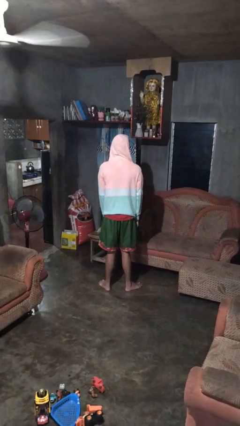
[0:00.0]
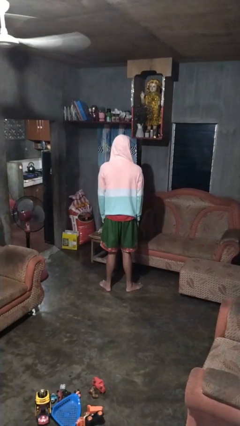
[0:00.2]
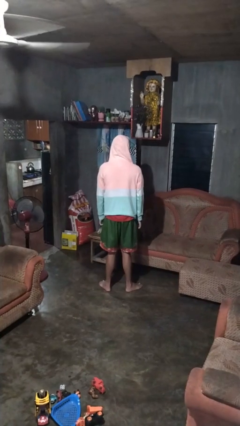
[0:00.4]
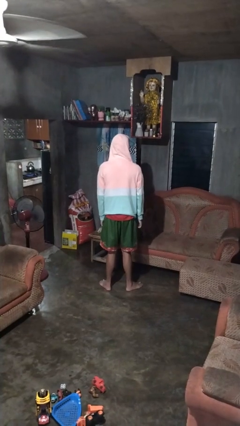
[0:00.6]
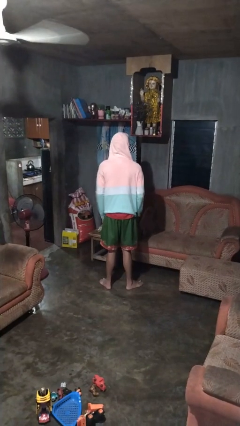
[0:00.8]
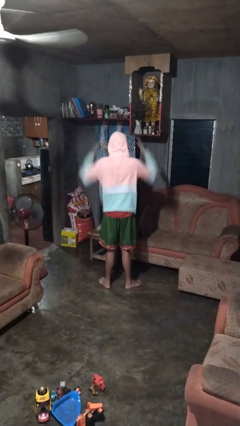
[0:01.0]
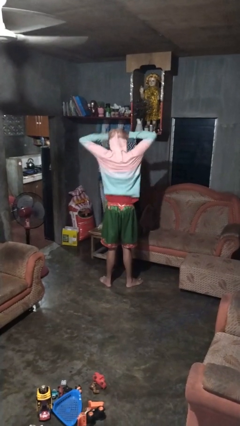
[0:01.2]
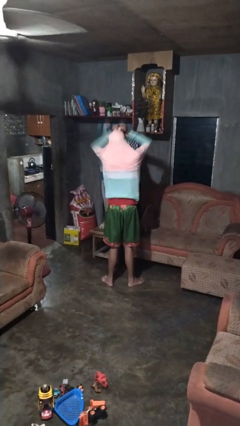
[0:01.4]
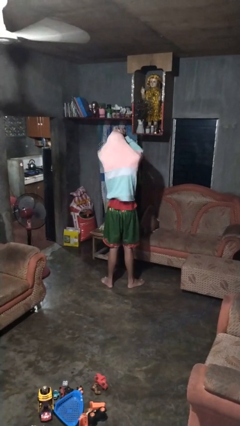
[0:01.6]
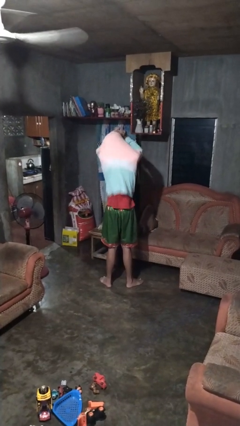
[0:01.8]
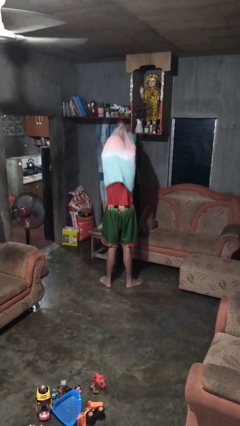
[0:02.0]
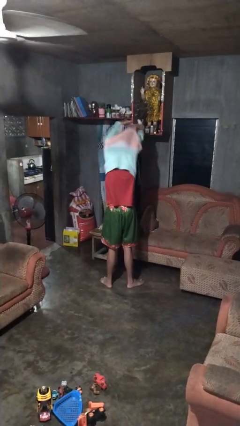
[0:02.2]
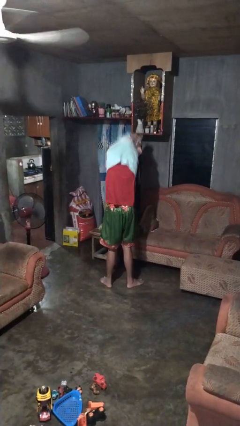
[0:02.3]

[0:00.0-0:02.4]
person takes off hoodie

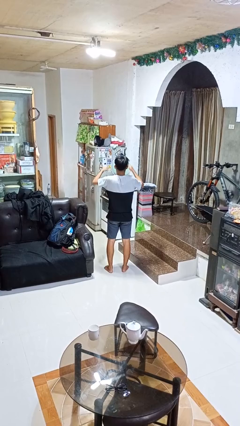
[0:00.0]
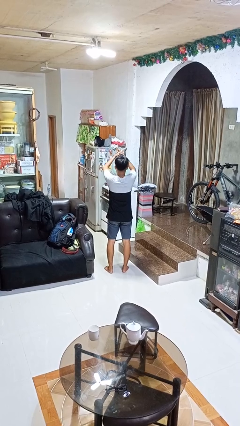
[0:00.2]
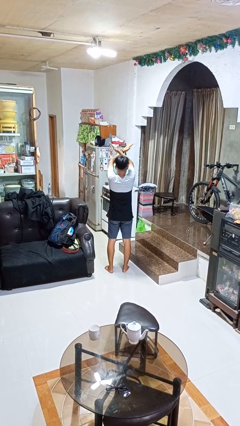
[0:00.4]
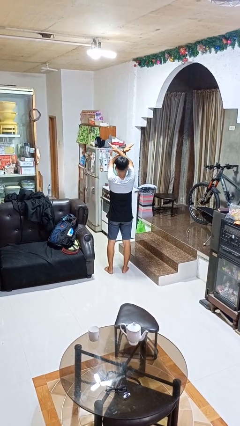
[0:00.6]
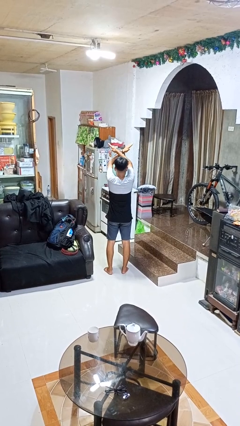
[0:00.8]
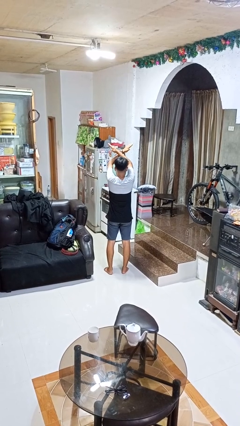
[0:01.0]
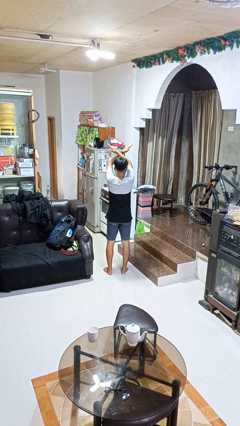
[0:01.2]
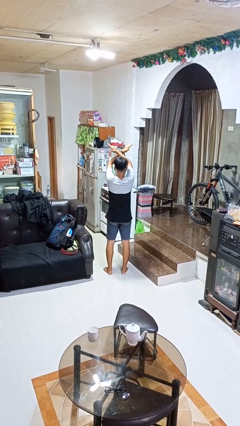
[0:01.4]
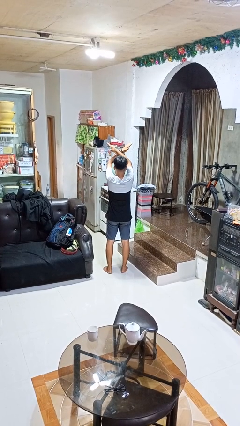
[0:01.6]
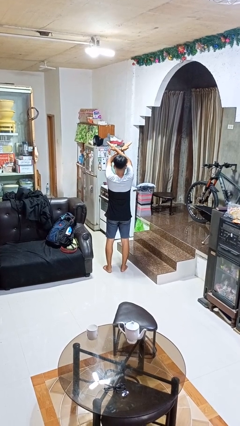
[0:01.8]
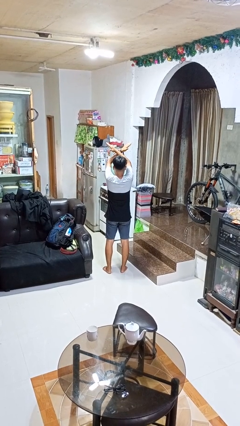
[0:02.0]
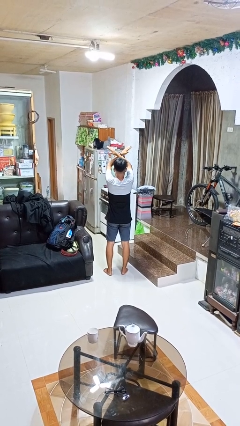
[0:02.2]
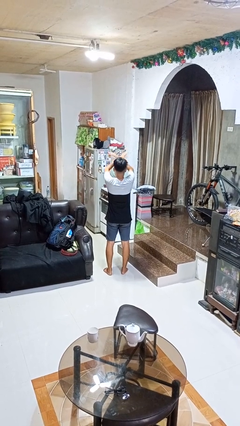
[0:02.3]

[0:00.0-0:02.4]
person gestures arms x

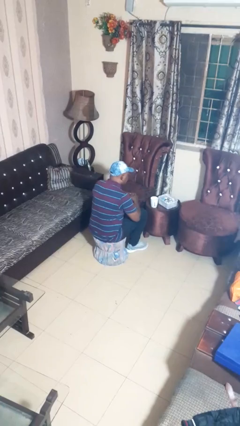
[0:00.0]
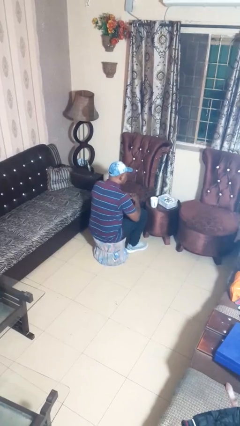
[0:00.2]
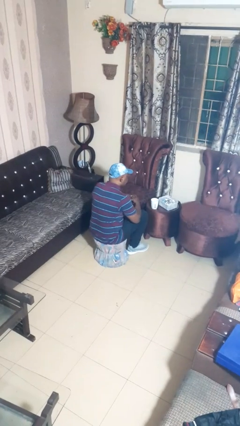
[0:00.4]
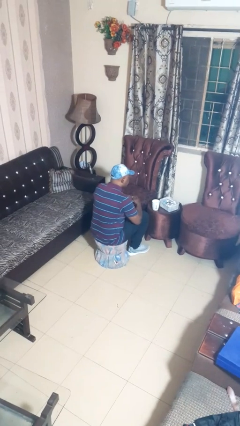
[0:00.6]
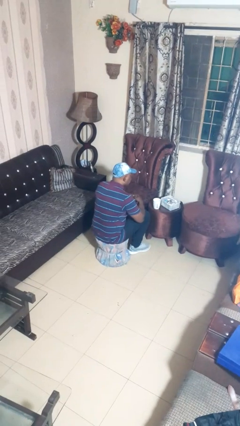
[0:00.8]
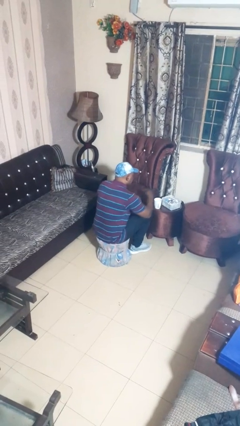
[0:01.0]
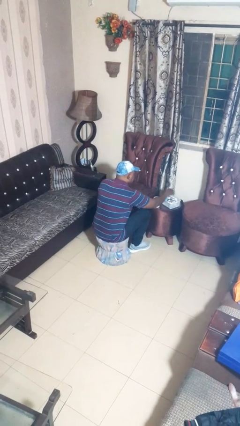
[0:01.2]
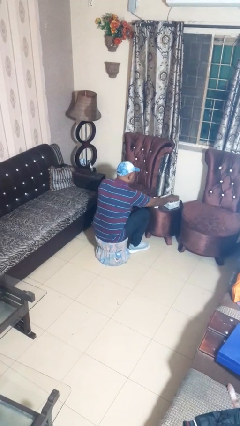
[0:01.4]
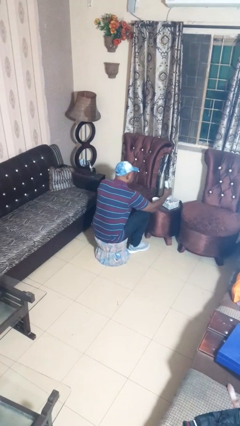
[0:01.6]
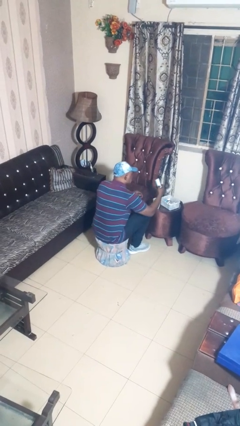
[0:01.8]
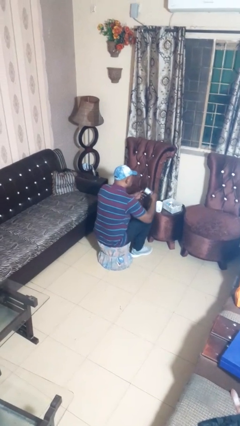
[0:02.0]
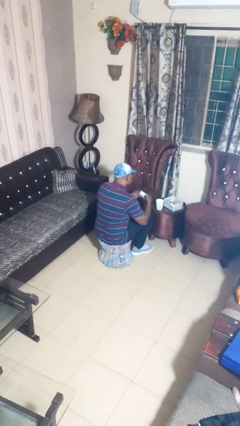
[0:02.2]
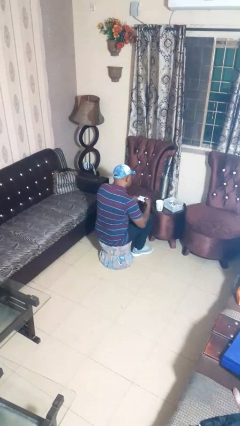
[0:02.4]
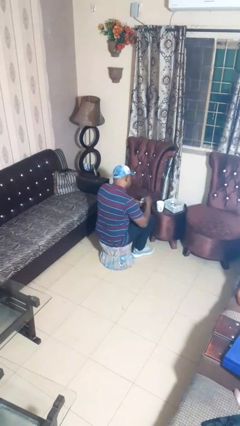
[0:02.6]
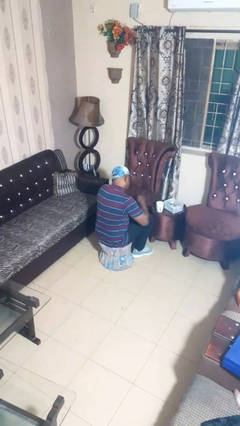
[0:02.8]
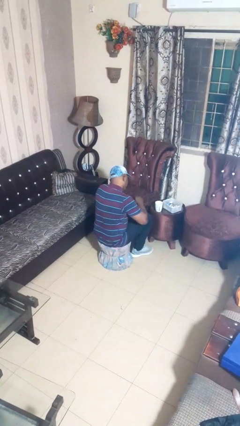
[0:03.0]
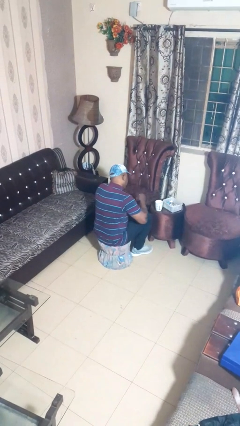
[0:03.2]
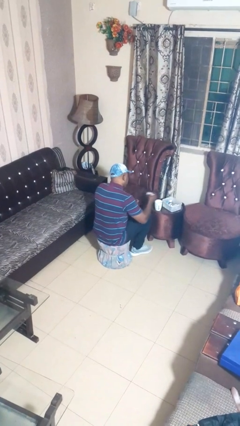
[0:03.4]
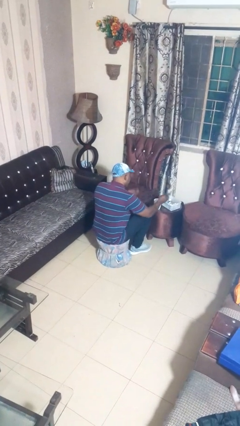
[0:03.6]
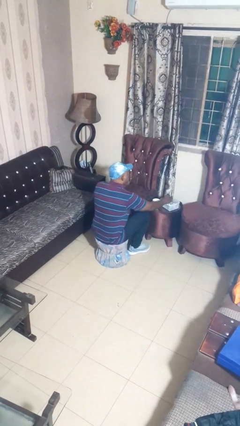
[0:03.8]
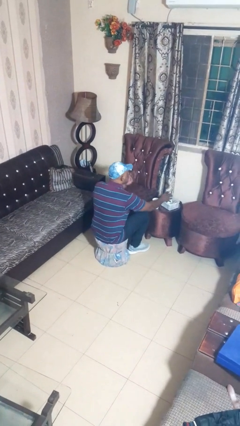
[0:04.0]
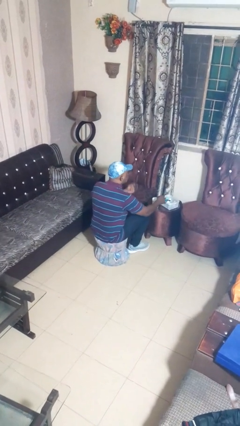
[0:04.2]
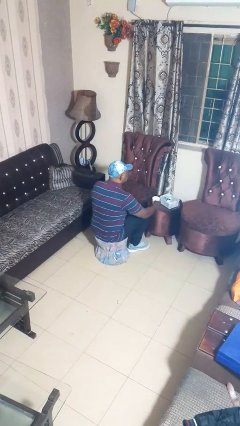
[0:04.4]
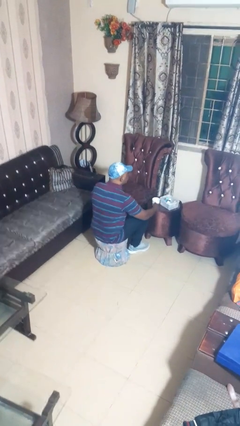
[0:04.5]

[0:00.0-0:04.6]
person takes medicine pills

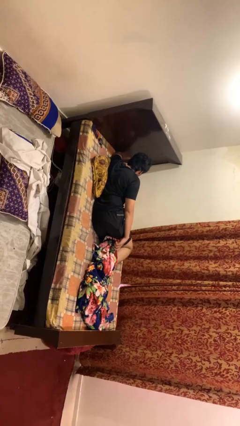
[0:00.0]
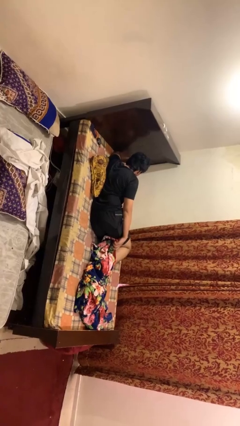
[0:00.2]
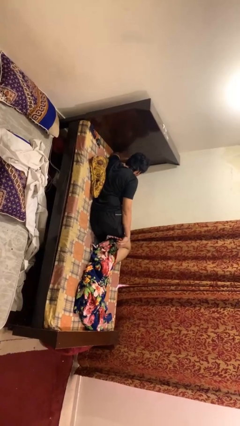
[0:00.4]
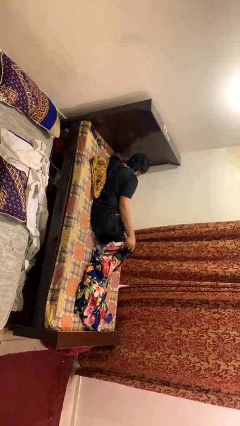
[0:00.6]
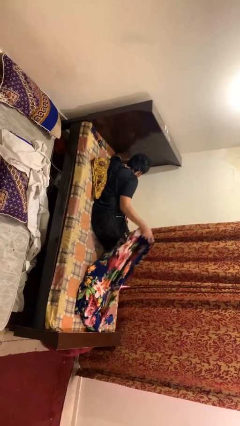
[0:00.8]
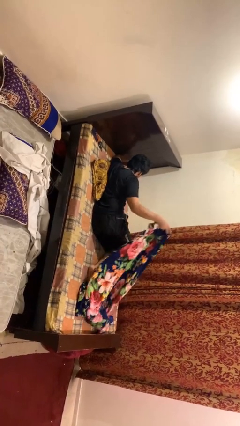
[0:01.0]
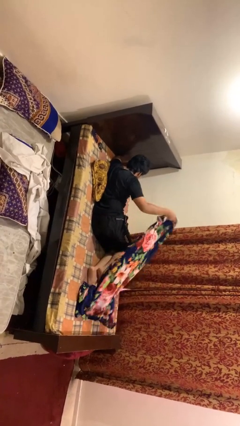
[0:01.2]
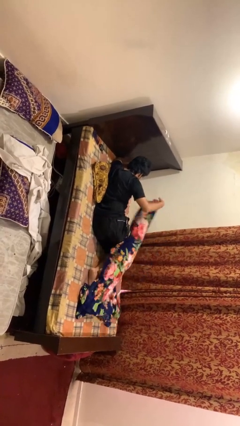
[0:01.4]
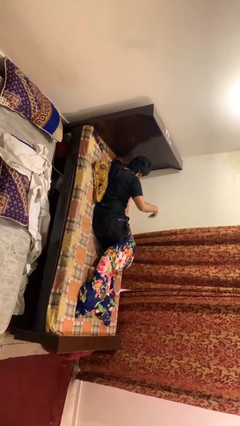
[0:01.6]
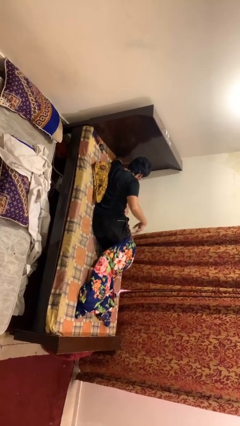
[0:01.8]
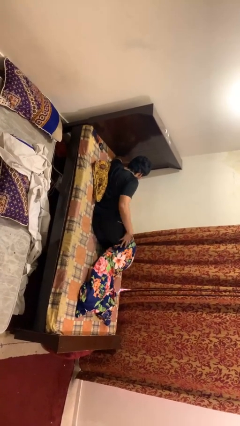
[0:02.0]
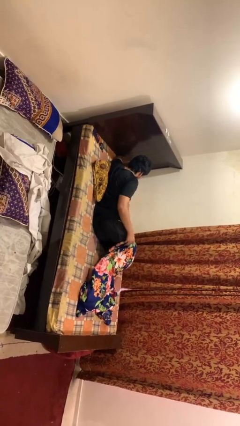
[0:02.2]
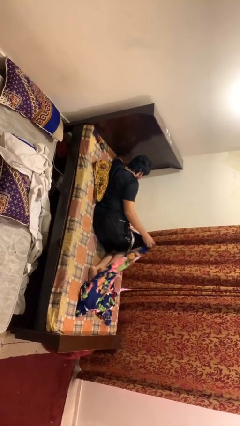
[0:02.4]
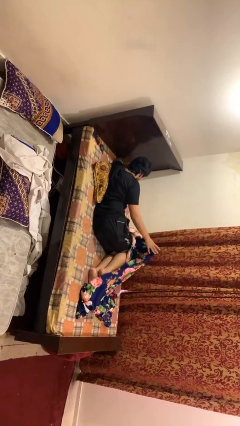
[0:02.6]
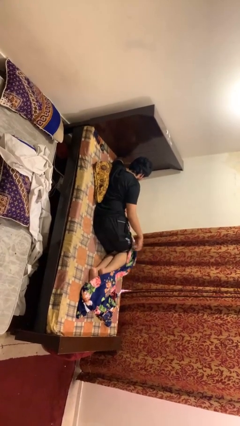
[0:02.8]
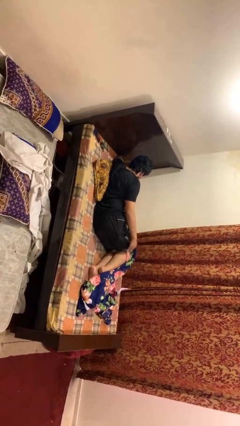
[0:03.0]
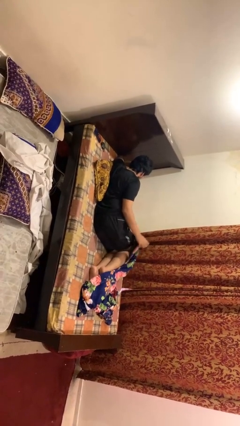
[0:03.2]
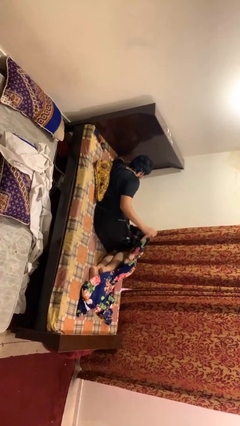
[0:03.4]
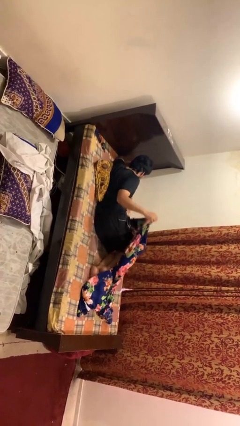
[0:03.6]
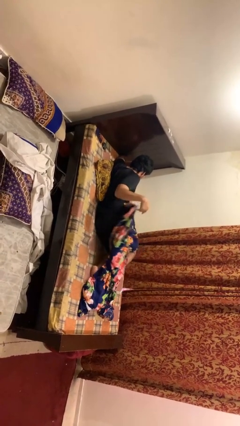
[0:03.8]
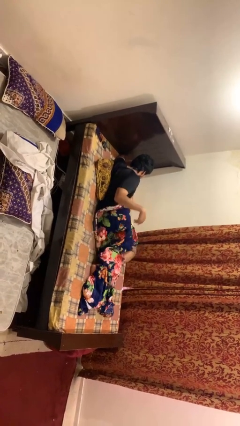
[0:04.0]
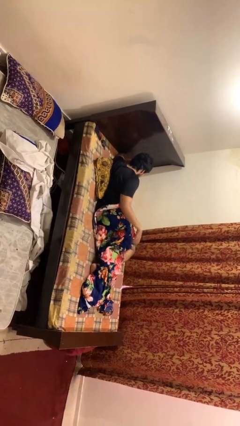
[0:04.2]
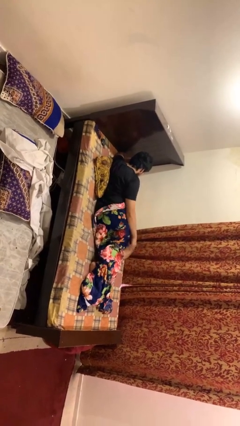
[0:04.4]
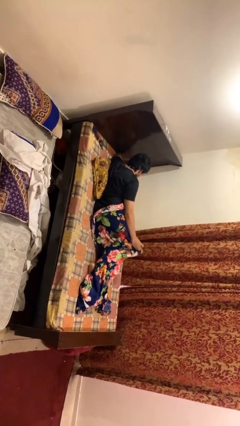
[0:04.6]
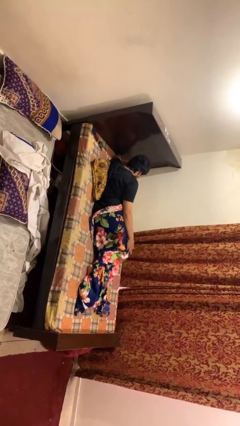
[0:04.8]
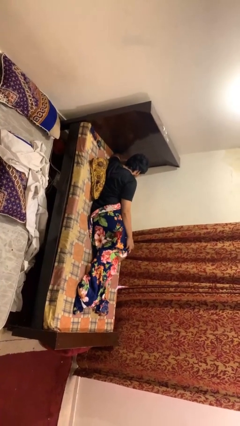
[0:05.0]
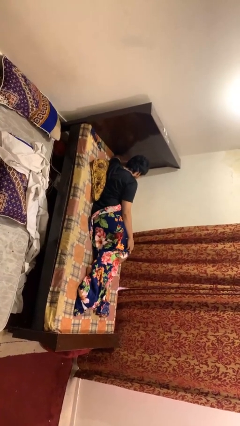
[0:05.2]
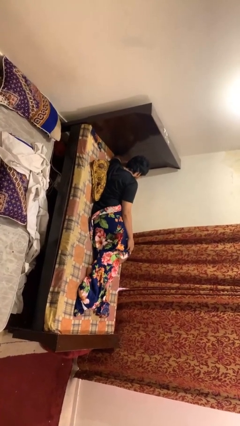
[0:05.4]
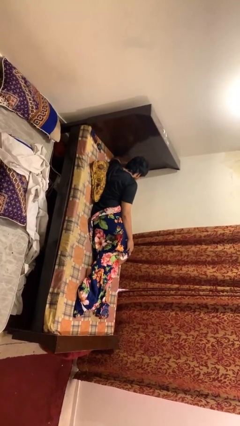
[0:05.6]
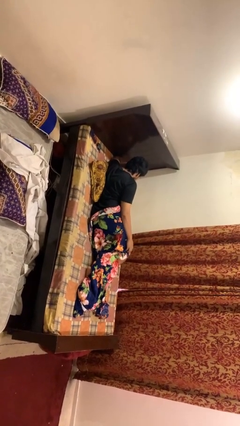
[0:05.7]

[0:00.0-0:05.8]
person covers with blanket

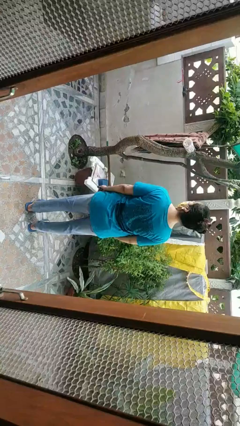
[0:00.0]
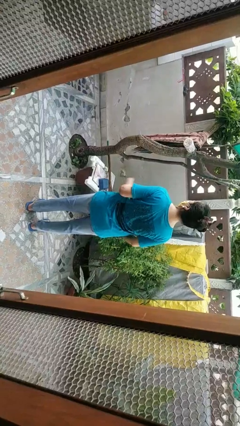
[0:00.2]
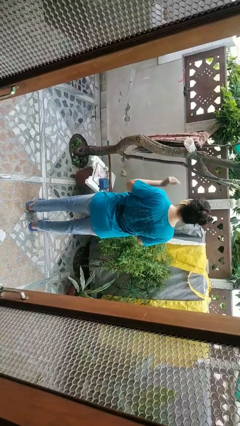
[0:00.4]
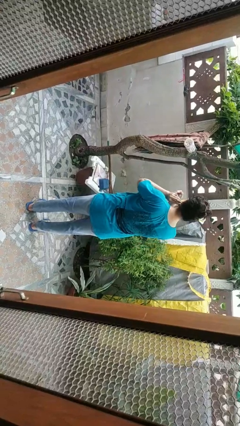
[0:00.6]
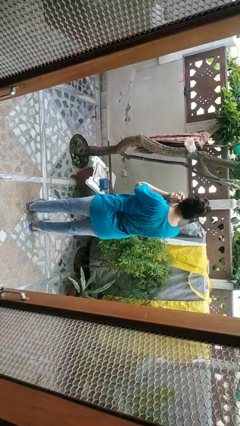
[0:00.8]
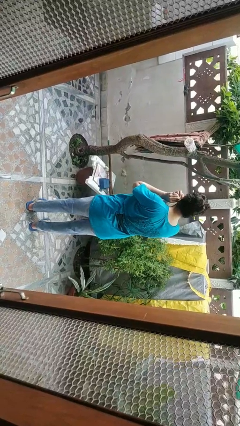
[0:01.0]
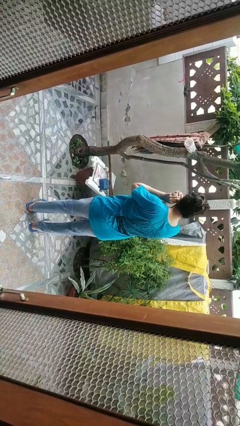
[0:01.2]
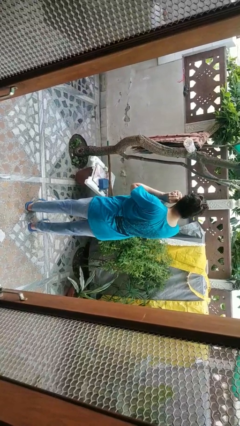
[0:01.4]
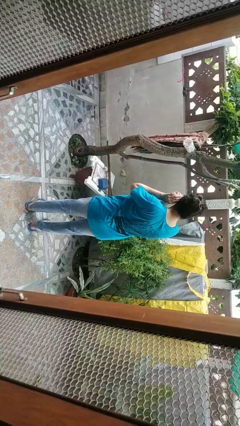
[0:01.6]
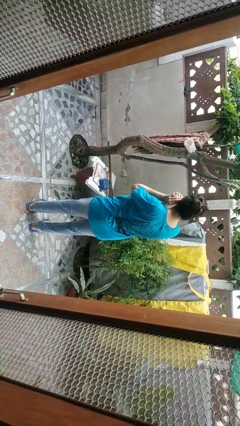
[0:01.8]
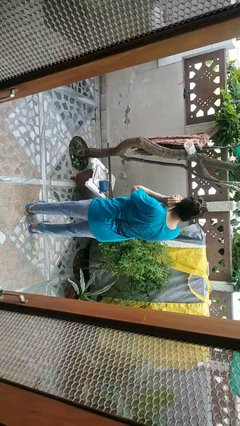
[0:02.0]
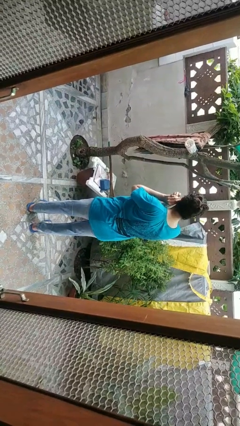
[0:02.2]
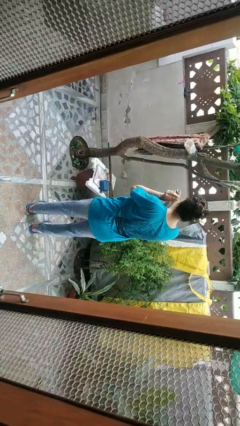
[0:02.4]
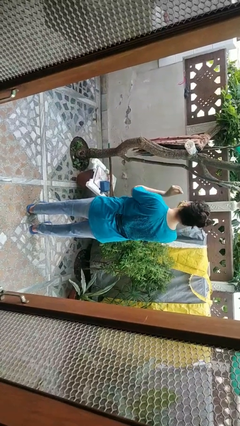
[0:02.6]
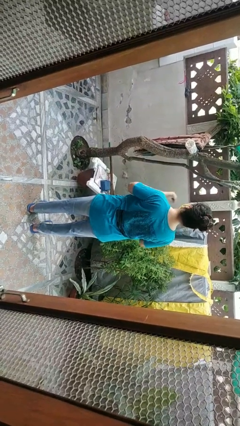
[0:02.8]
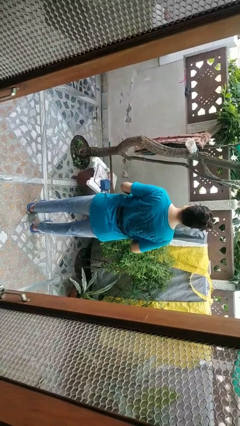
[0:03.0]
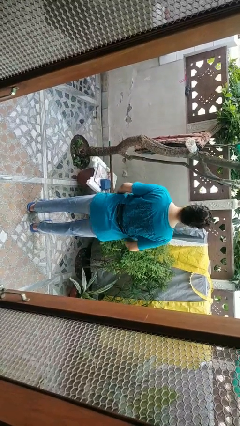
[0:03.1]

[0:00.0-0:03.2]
person takes off earrings
